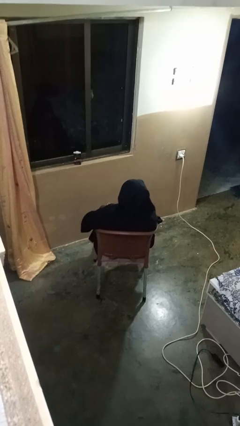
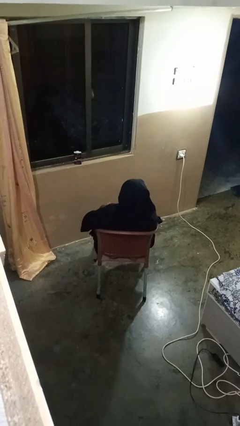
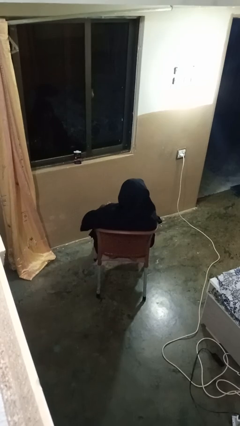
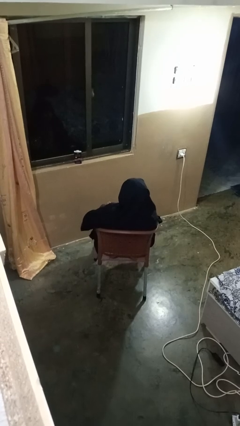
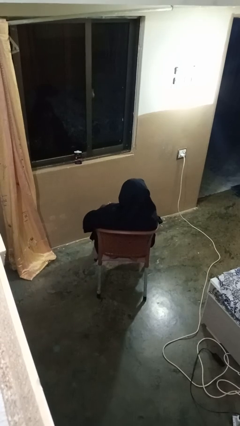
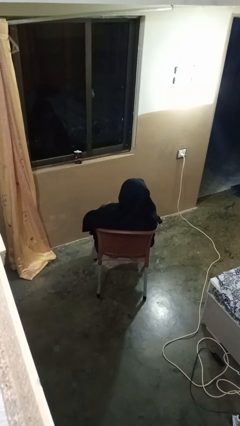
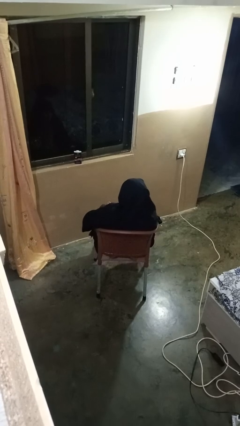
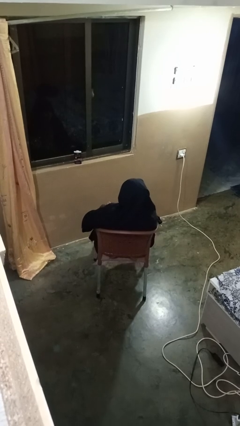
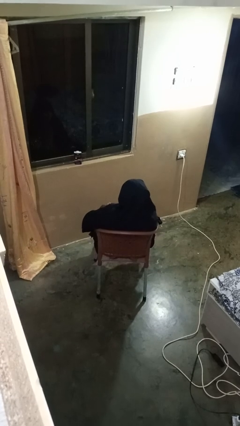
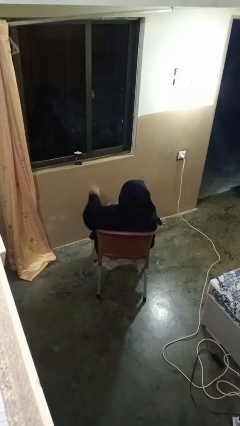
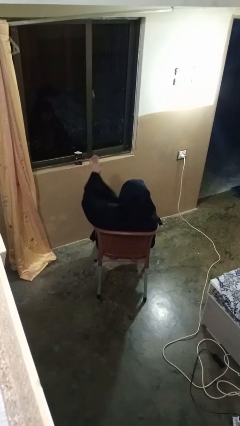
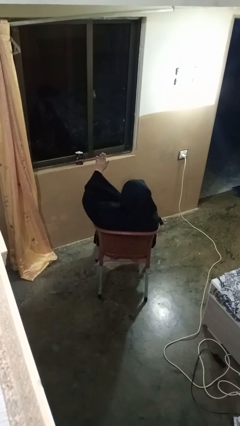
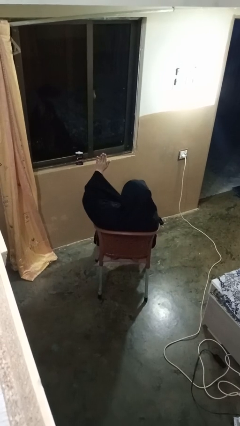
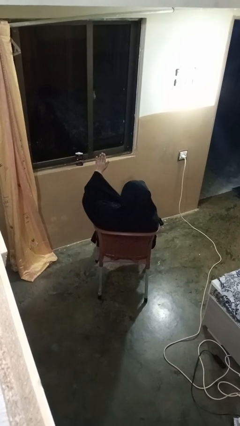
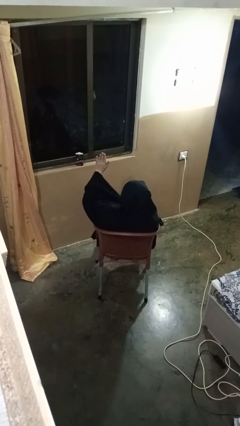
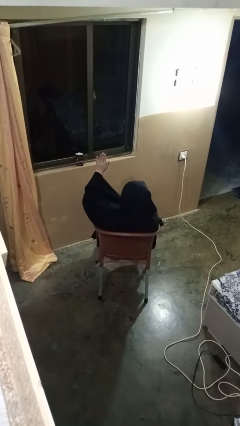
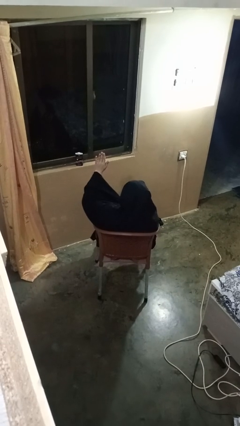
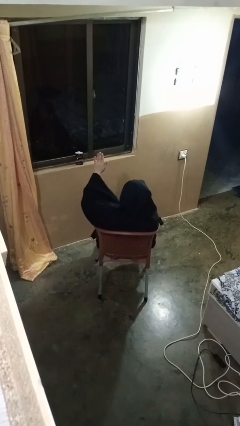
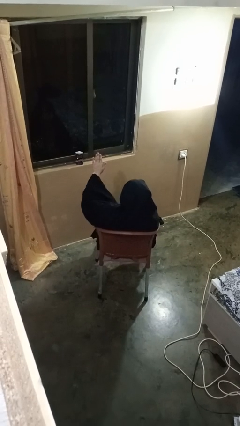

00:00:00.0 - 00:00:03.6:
person gestures raise hand

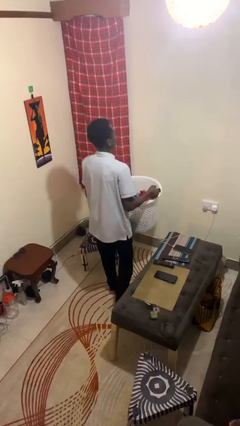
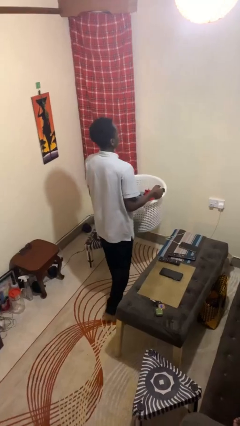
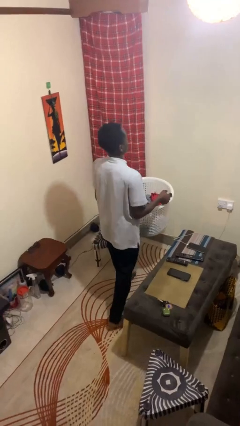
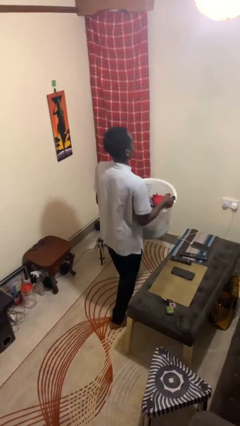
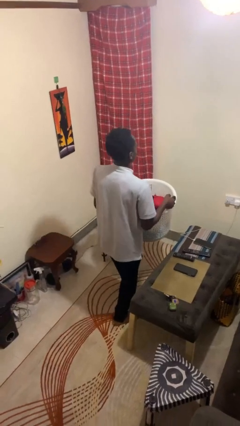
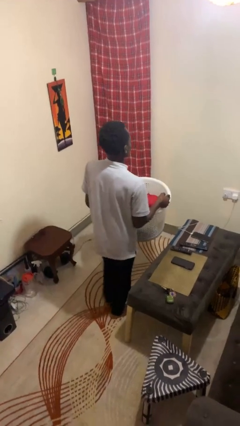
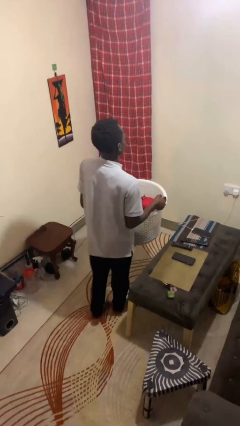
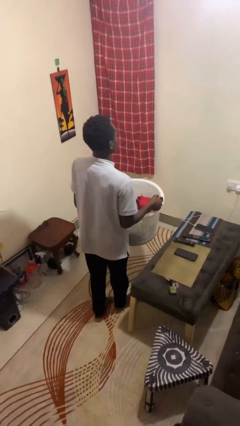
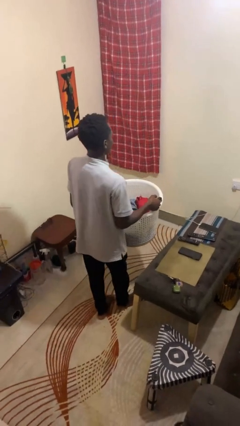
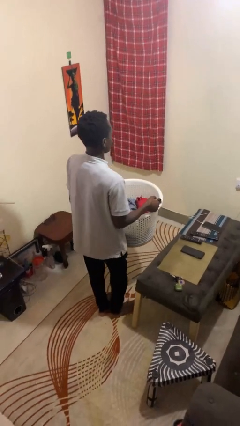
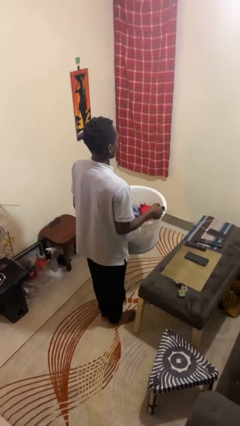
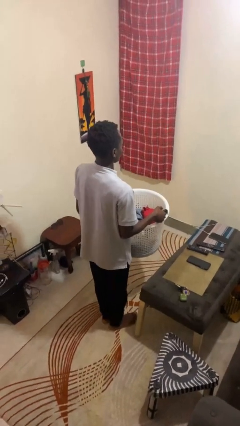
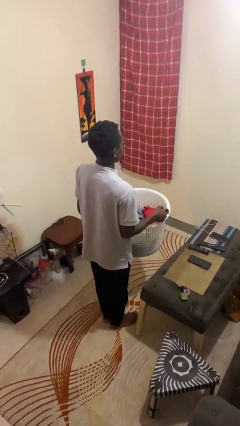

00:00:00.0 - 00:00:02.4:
person carries laundry basket

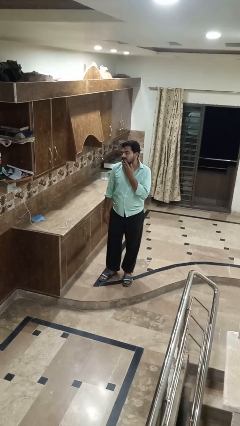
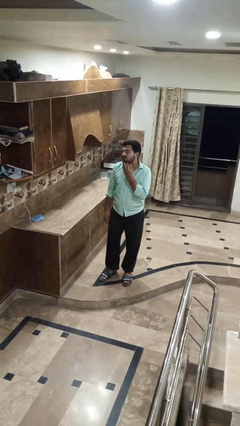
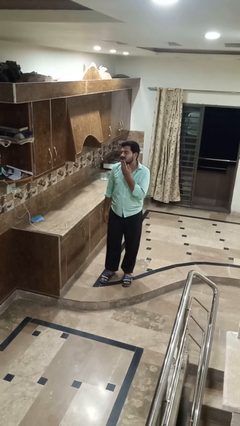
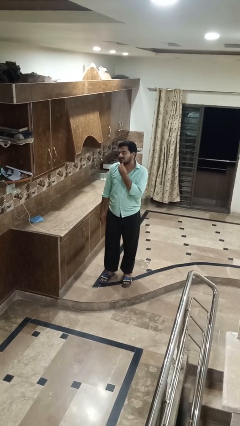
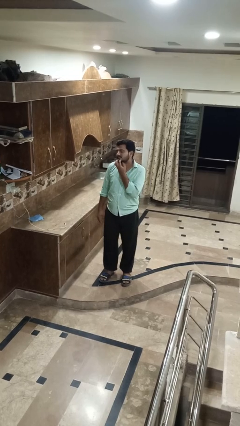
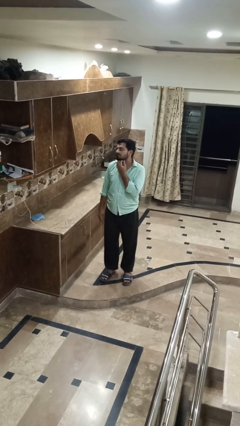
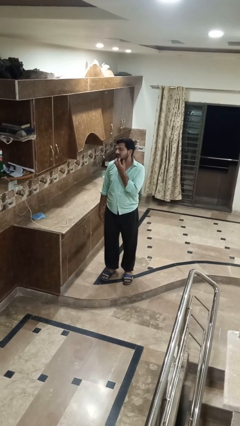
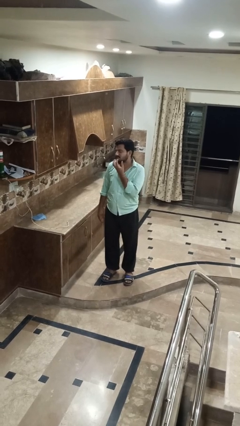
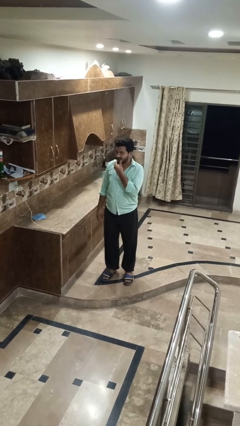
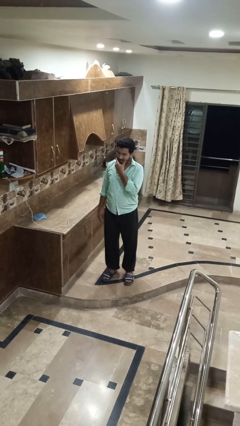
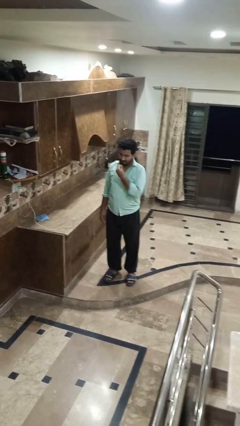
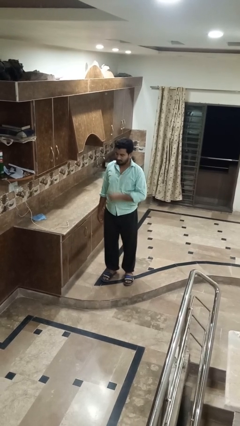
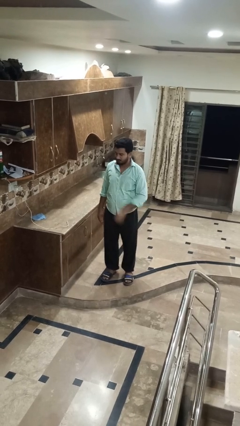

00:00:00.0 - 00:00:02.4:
person strokes chin

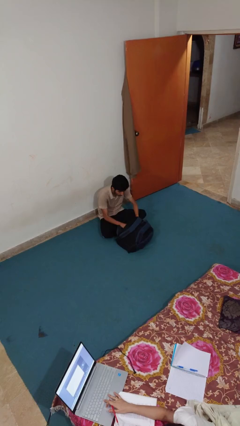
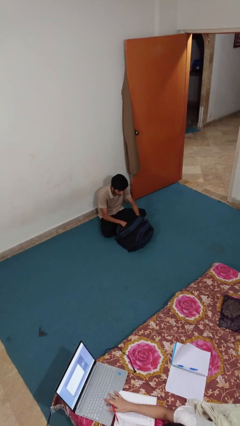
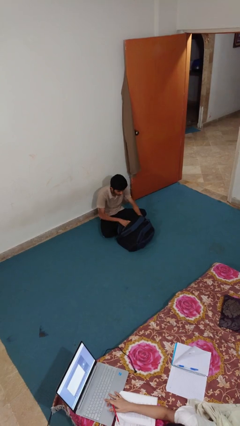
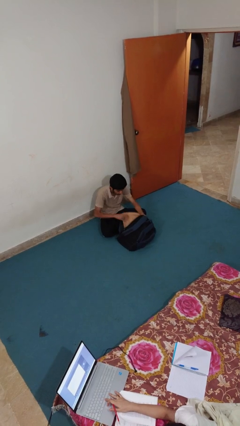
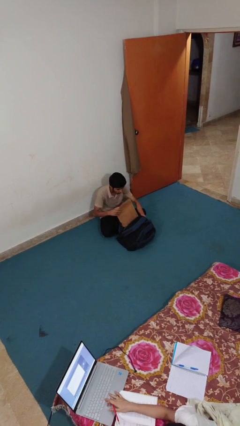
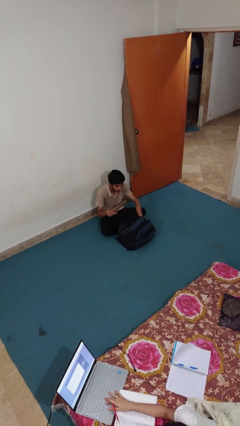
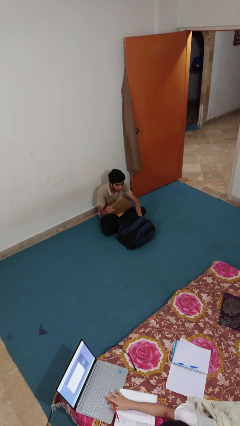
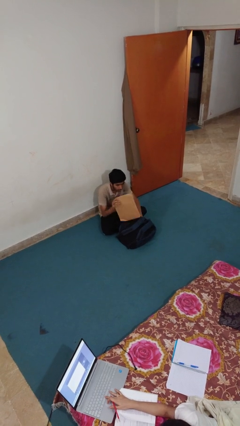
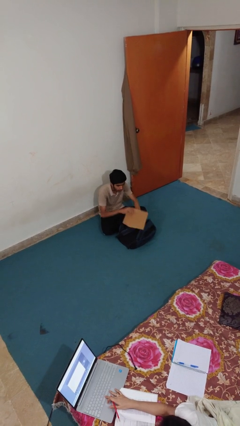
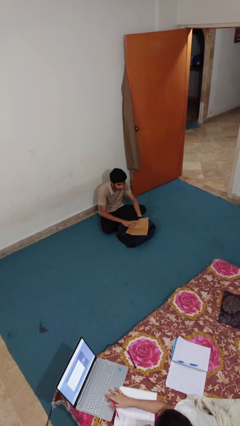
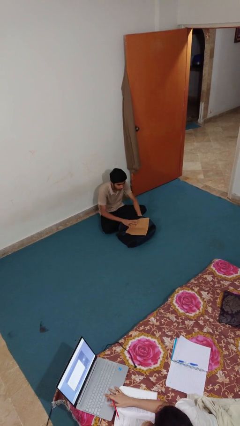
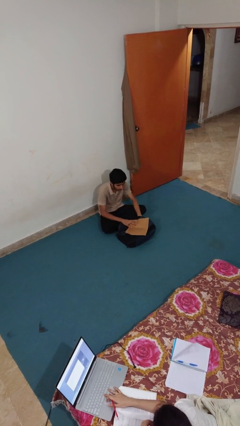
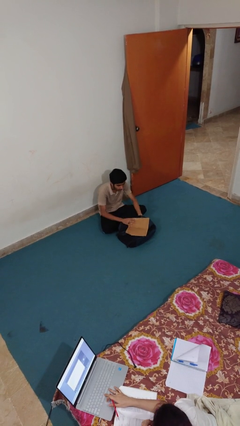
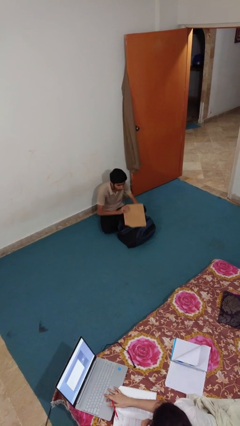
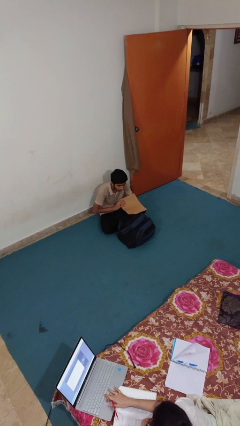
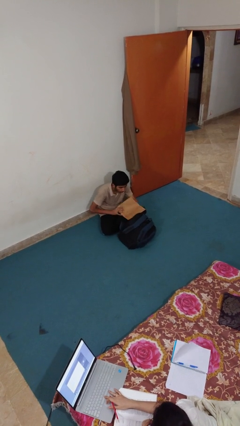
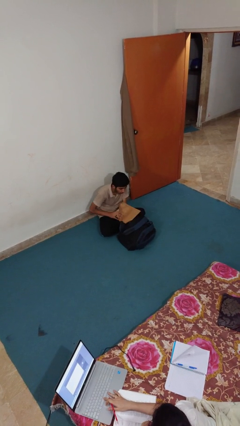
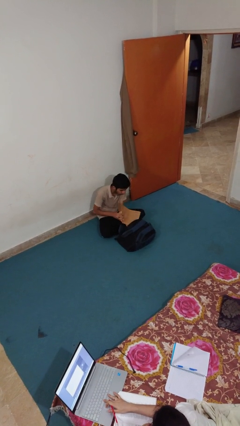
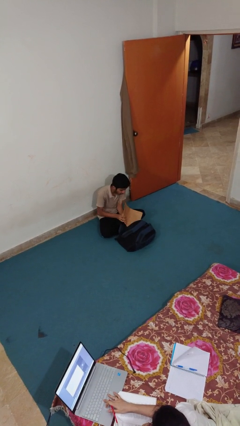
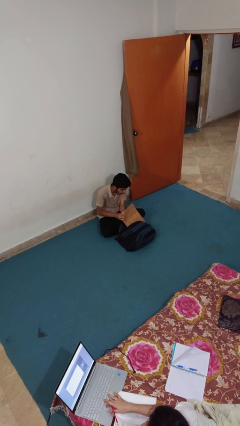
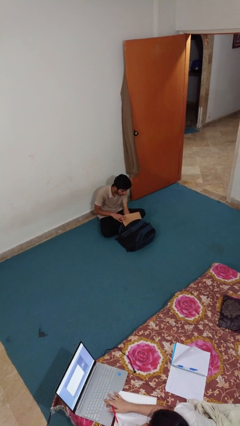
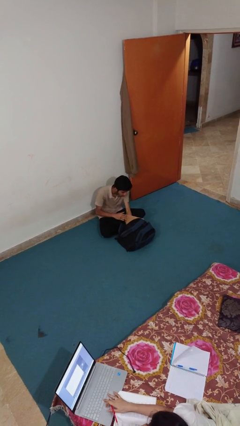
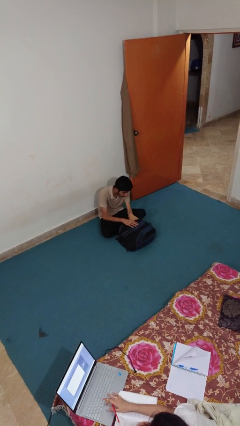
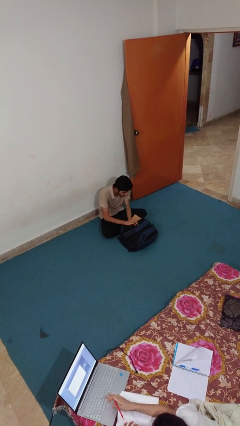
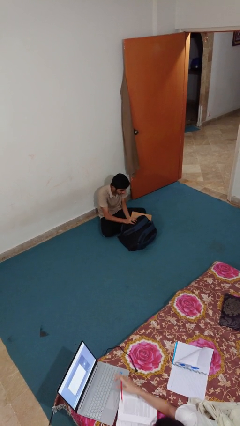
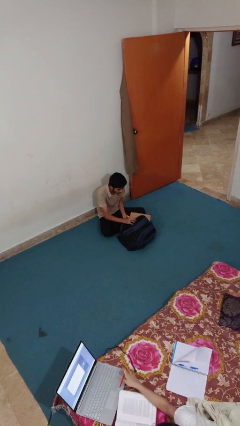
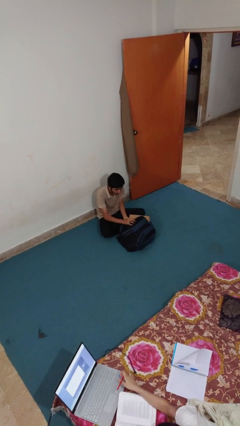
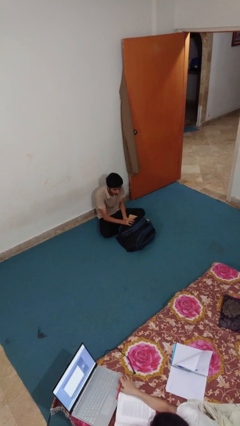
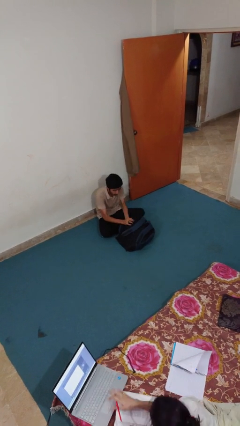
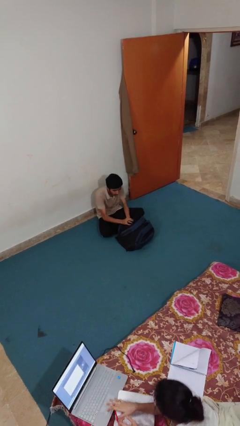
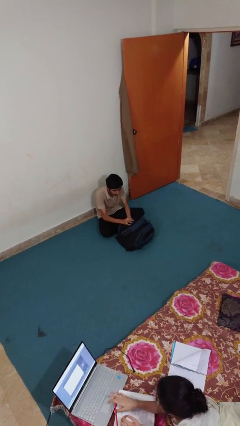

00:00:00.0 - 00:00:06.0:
person sweeps floor

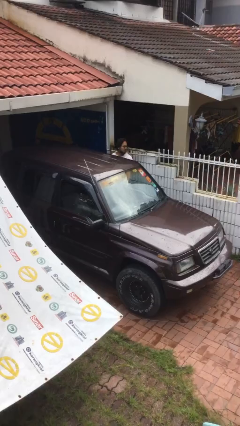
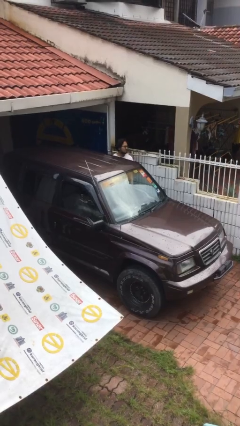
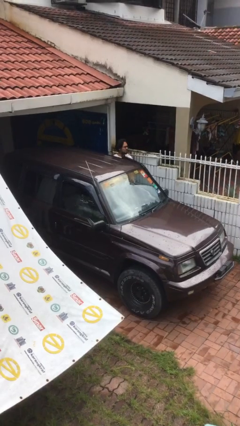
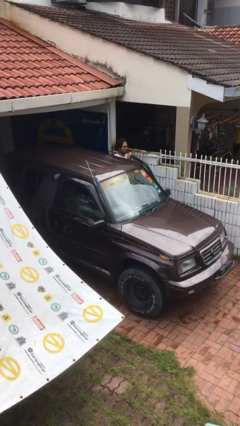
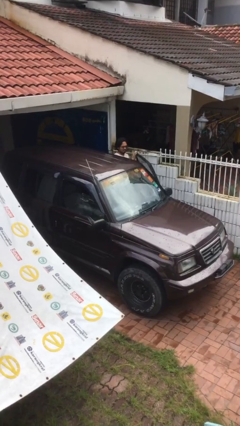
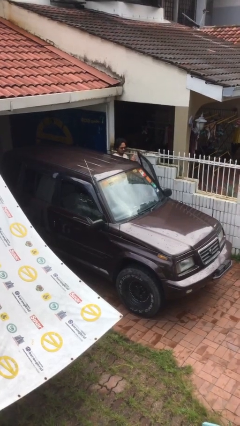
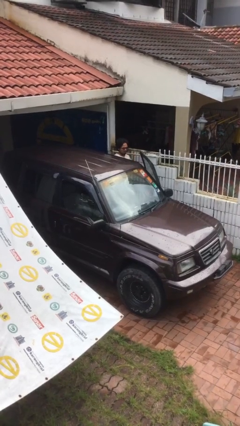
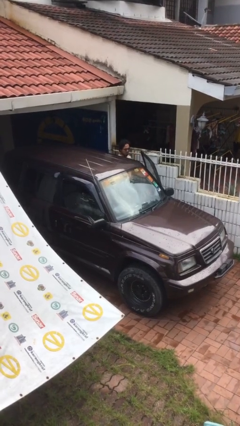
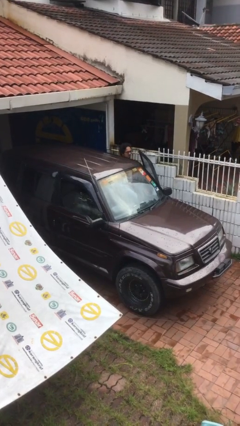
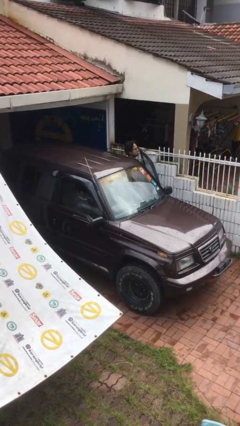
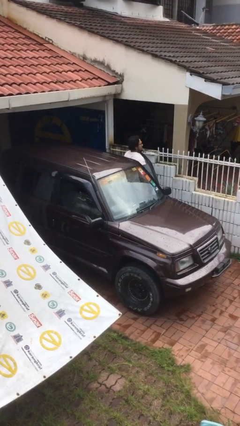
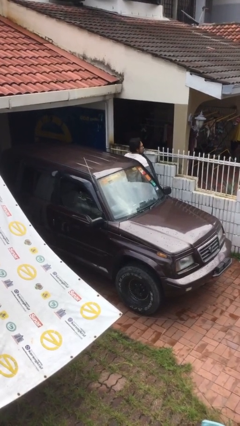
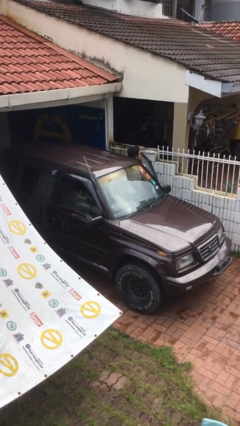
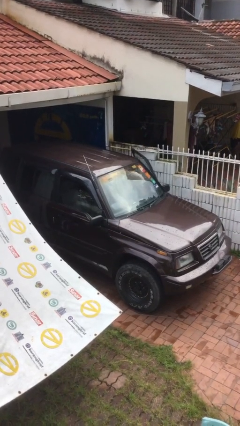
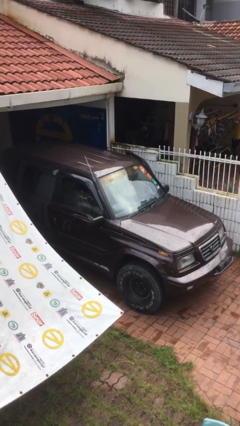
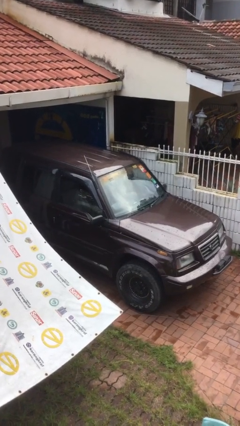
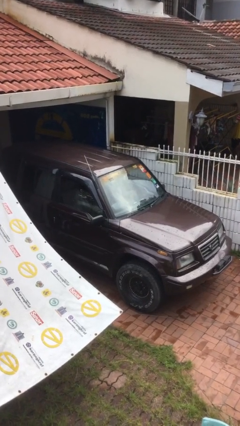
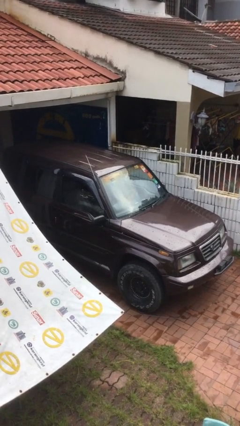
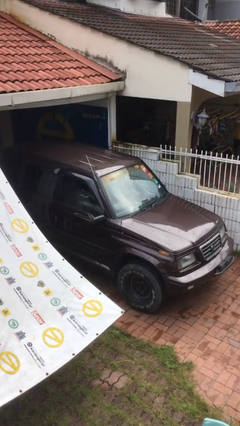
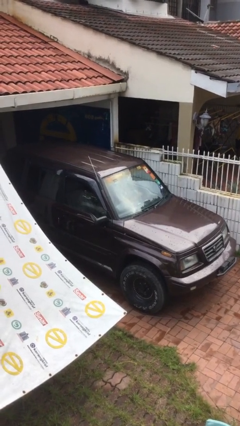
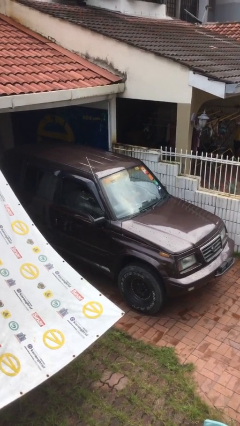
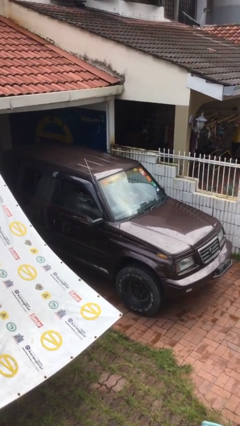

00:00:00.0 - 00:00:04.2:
car picks up person
